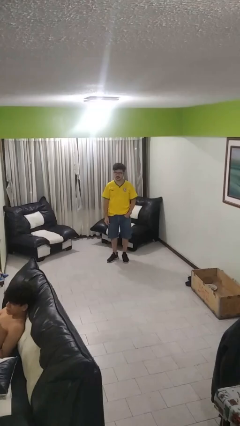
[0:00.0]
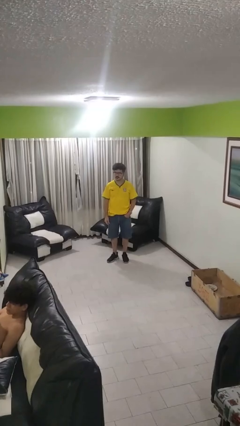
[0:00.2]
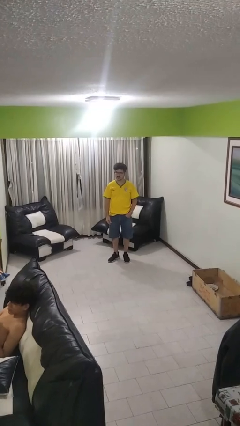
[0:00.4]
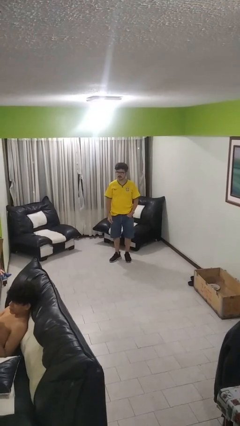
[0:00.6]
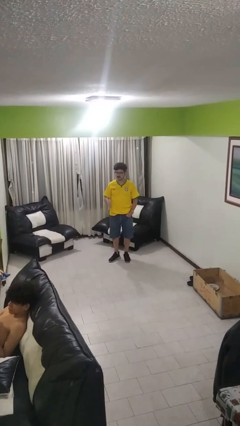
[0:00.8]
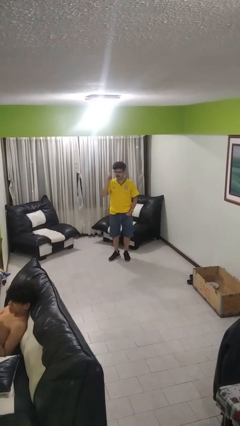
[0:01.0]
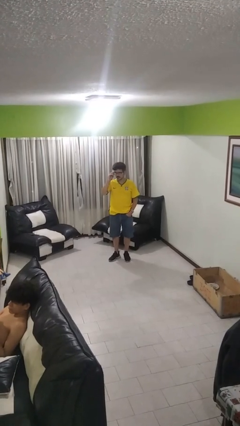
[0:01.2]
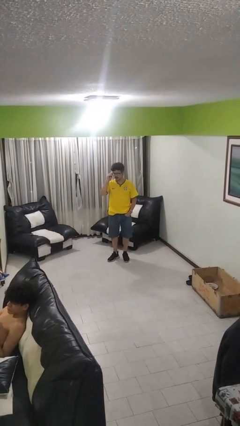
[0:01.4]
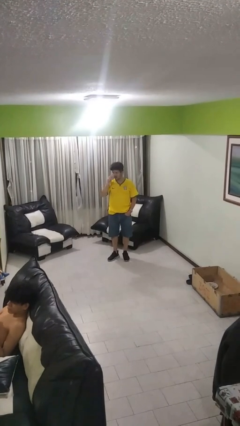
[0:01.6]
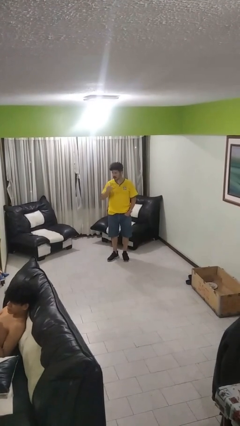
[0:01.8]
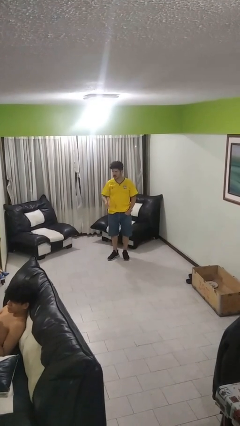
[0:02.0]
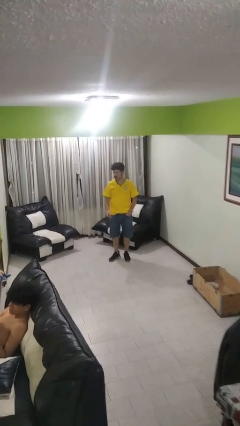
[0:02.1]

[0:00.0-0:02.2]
person takes off glasses

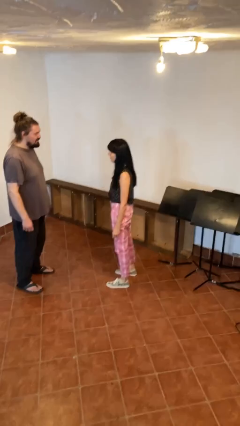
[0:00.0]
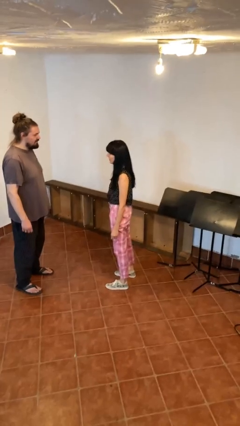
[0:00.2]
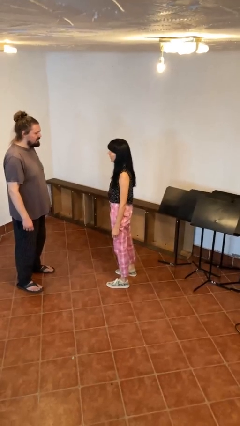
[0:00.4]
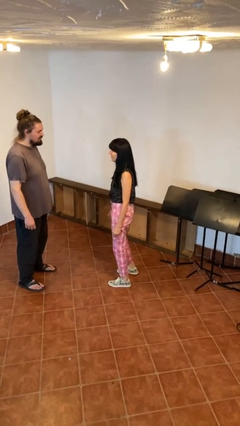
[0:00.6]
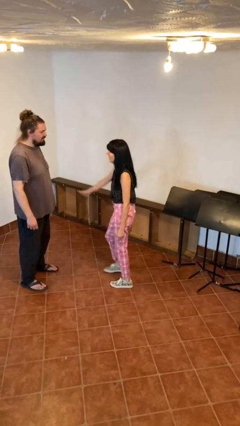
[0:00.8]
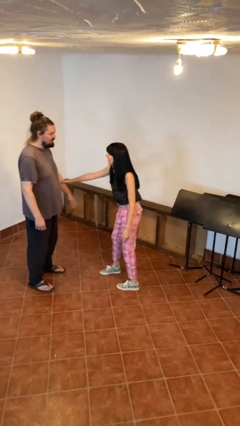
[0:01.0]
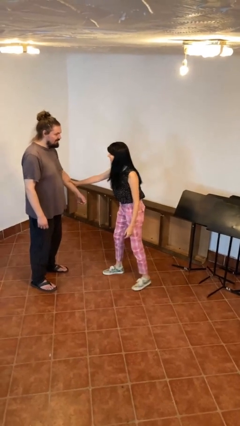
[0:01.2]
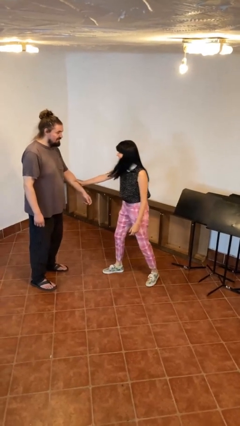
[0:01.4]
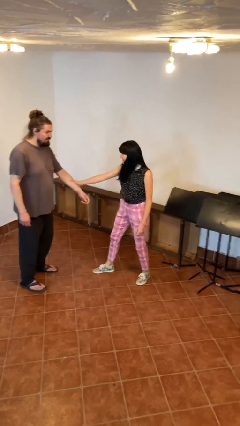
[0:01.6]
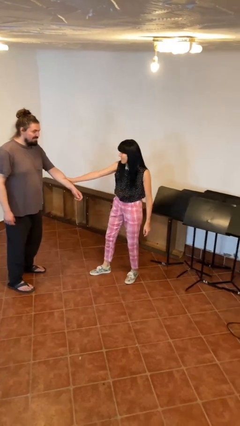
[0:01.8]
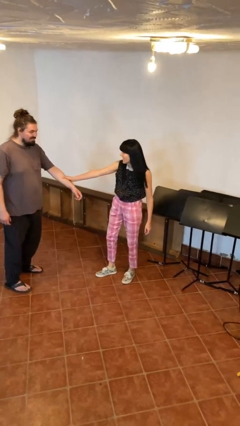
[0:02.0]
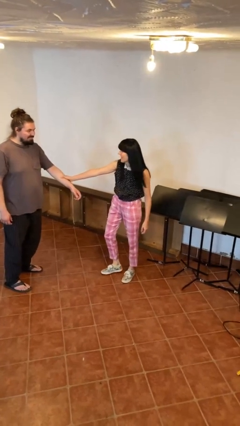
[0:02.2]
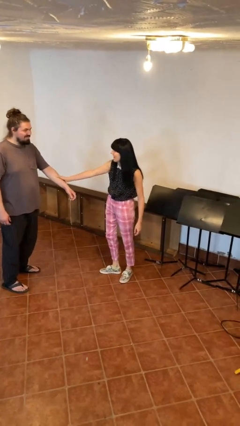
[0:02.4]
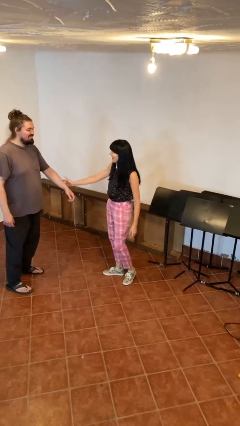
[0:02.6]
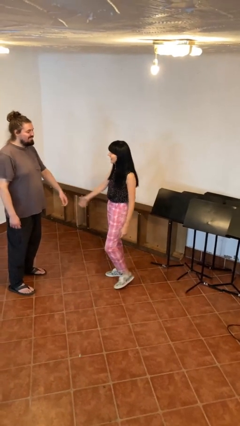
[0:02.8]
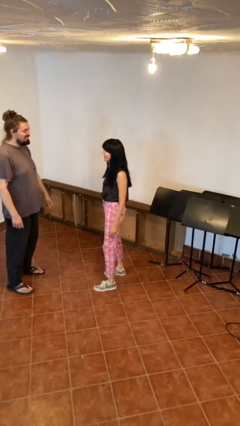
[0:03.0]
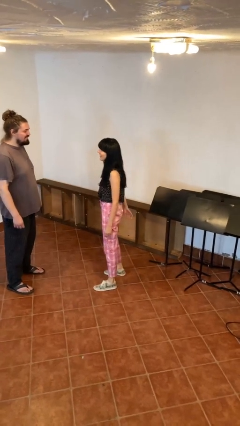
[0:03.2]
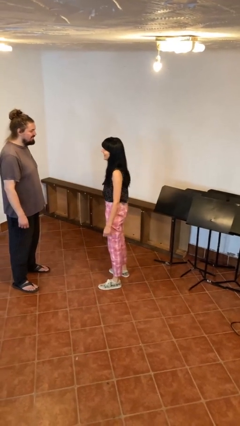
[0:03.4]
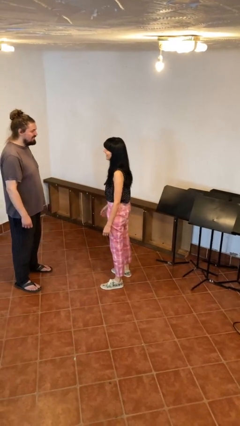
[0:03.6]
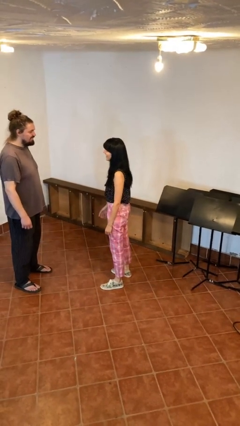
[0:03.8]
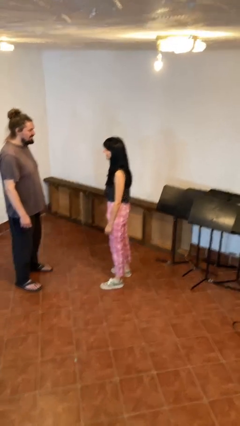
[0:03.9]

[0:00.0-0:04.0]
person grabs person by forearm

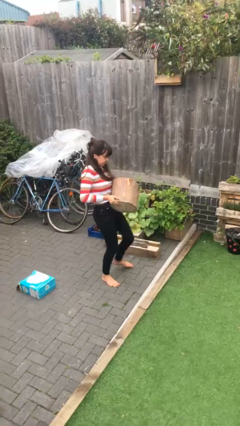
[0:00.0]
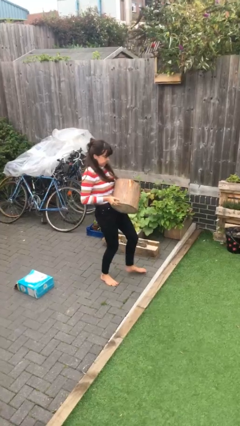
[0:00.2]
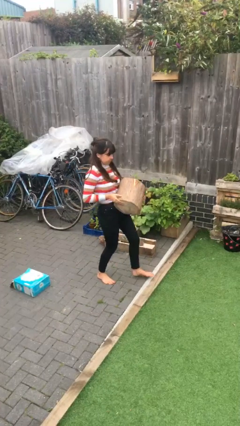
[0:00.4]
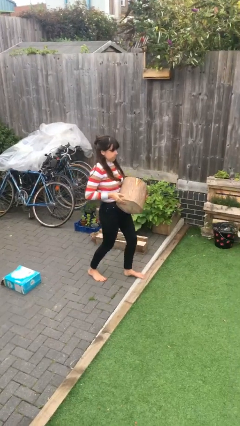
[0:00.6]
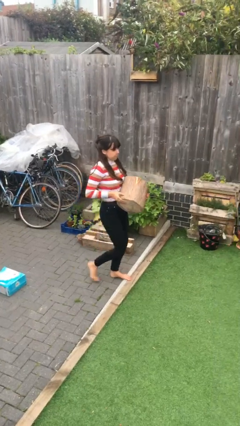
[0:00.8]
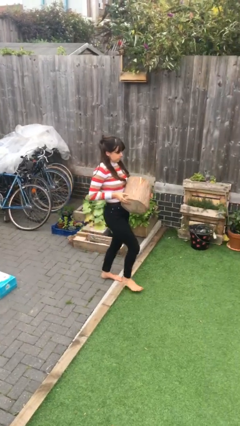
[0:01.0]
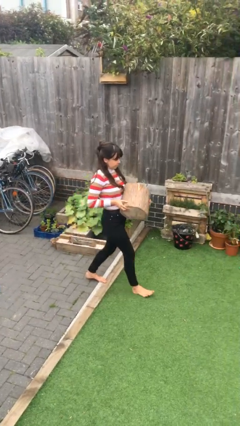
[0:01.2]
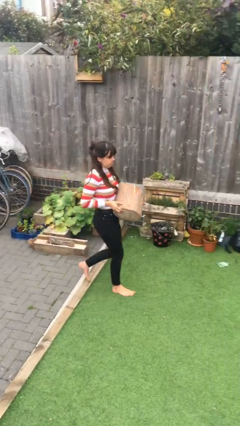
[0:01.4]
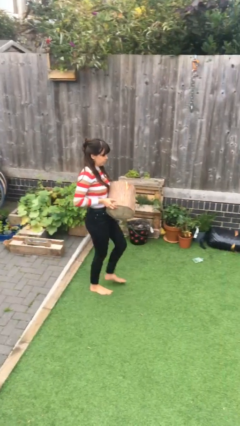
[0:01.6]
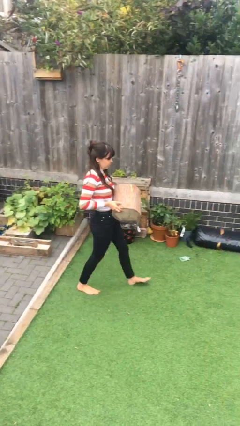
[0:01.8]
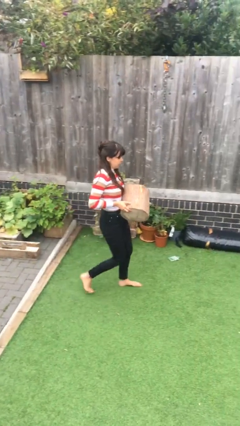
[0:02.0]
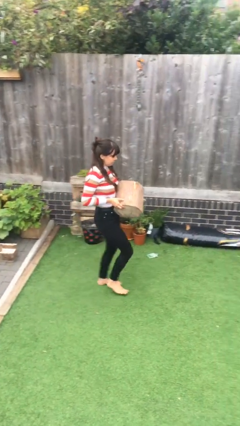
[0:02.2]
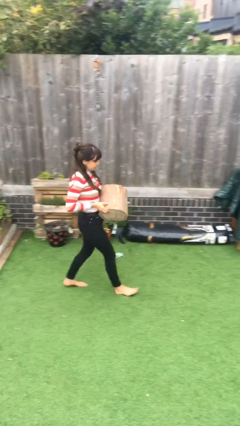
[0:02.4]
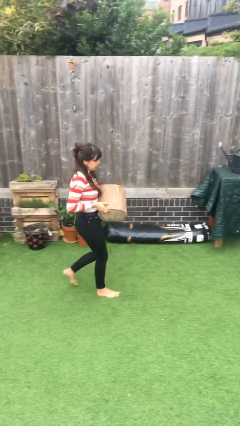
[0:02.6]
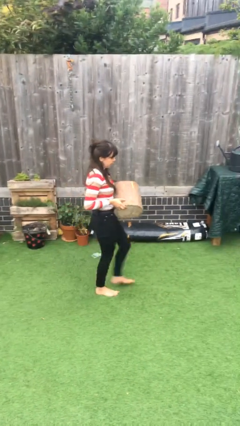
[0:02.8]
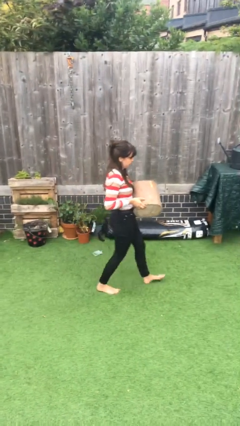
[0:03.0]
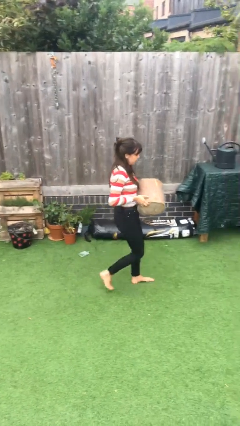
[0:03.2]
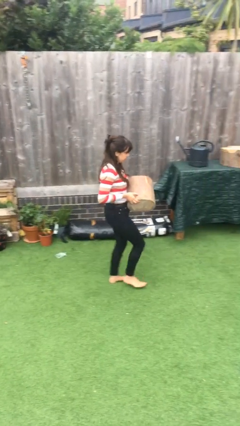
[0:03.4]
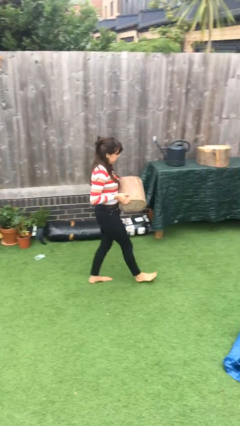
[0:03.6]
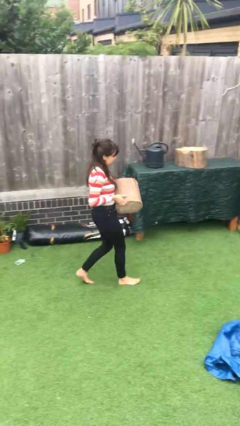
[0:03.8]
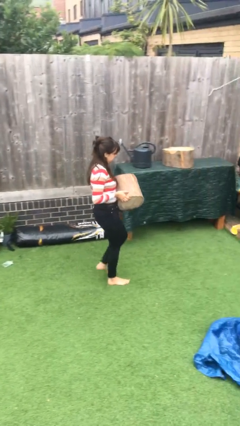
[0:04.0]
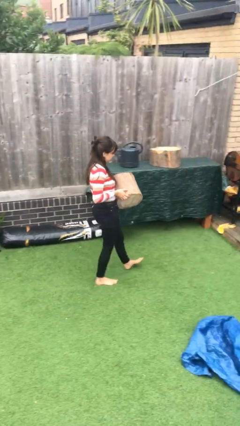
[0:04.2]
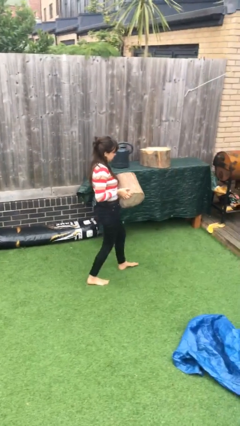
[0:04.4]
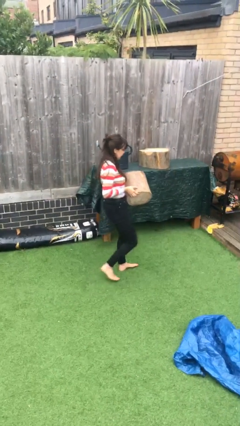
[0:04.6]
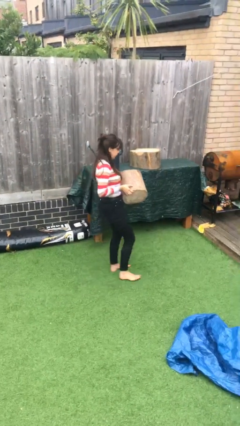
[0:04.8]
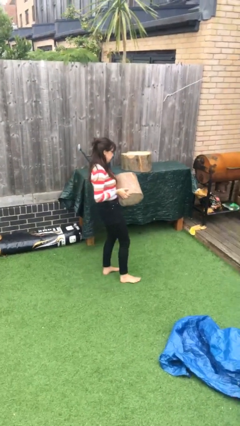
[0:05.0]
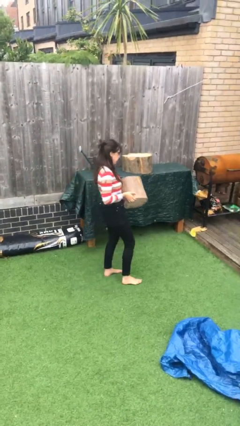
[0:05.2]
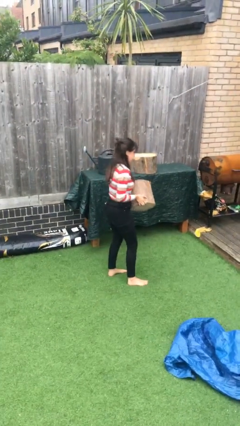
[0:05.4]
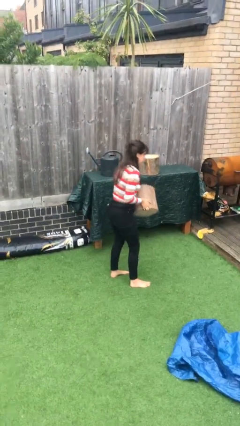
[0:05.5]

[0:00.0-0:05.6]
person carries heavy object

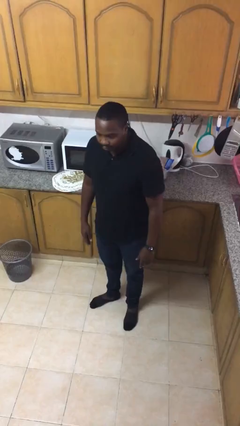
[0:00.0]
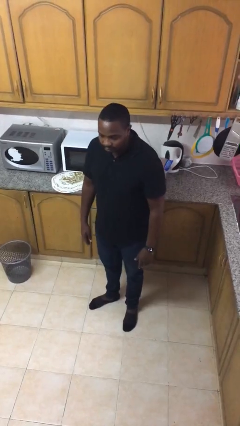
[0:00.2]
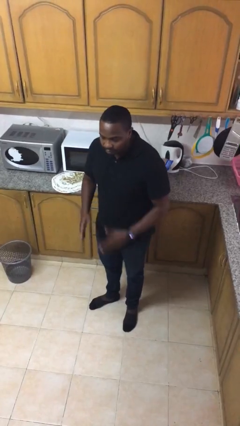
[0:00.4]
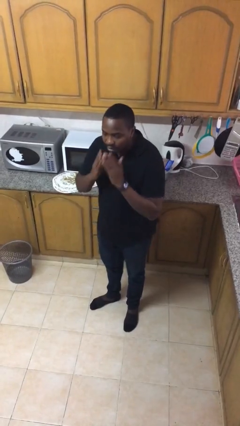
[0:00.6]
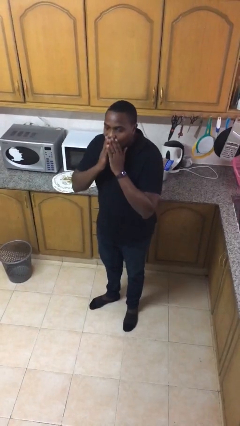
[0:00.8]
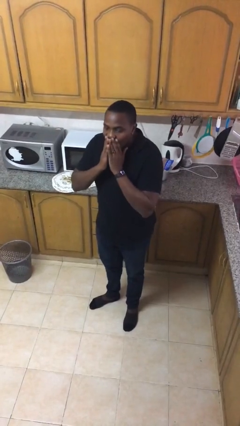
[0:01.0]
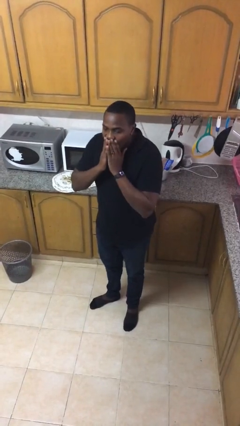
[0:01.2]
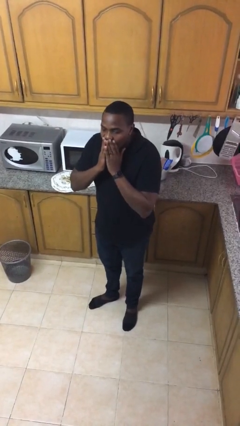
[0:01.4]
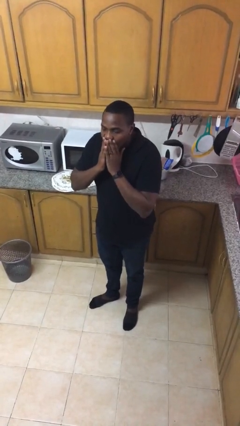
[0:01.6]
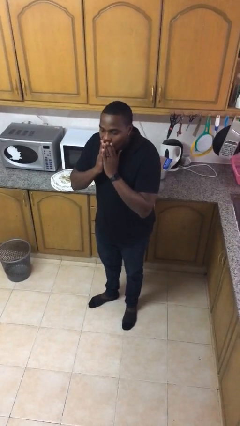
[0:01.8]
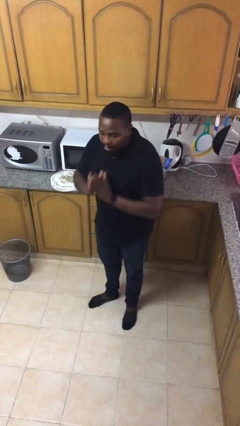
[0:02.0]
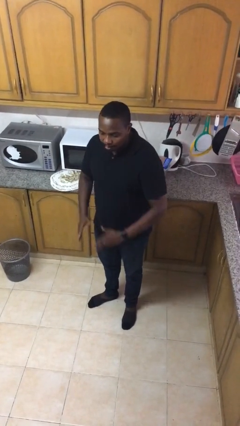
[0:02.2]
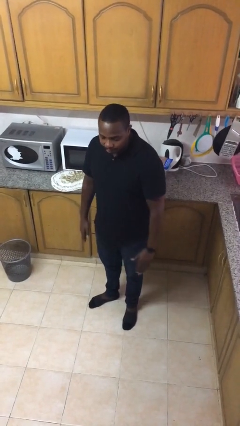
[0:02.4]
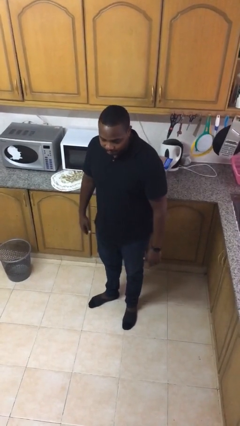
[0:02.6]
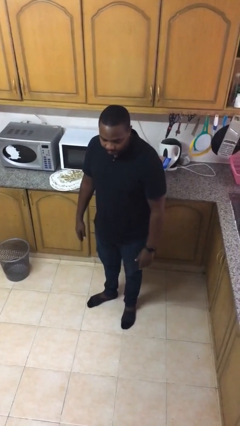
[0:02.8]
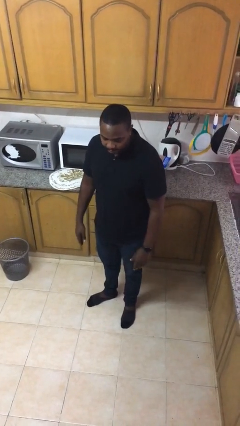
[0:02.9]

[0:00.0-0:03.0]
person yawns

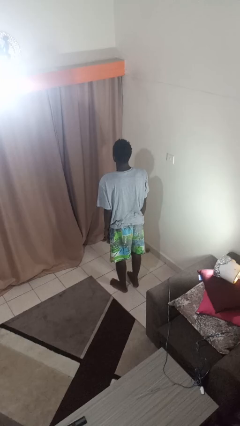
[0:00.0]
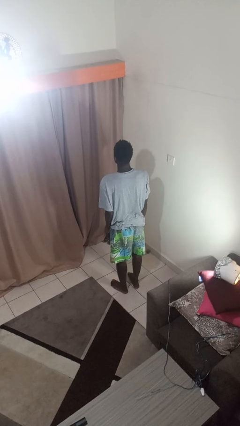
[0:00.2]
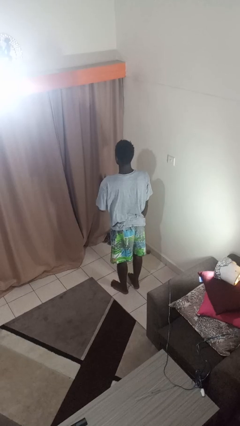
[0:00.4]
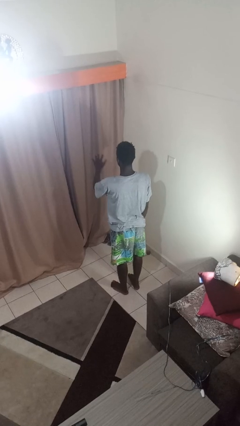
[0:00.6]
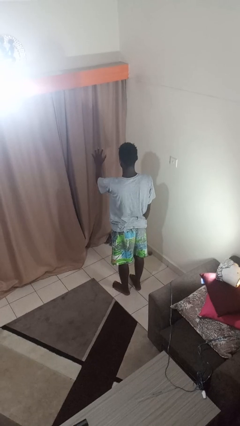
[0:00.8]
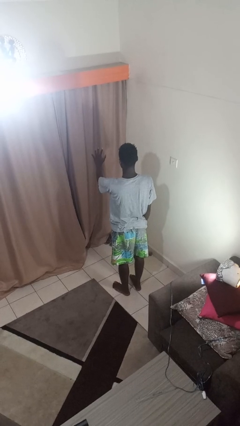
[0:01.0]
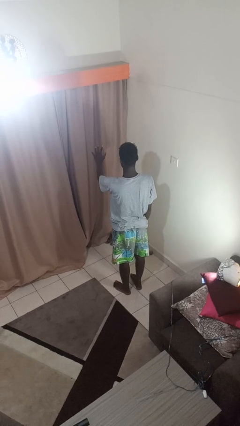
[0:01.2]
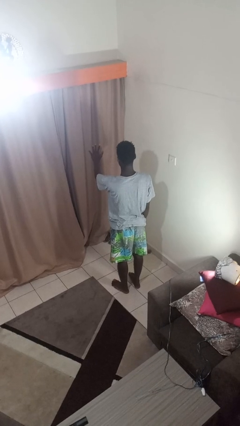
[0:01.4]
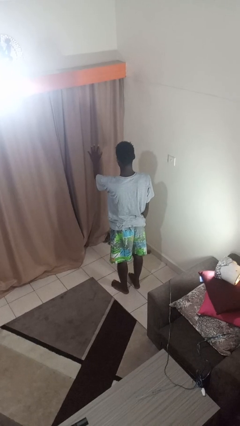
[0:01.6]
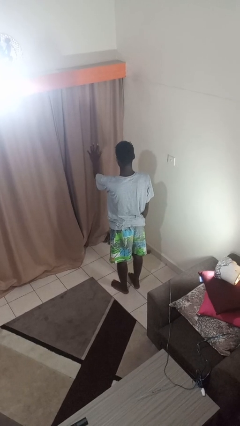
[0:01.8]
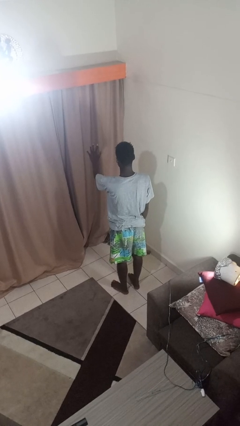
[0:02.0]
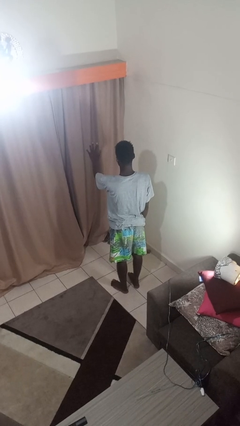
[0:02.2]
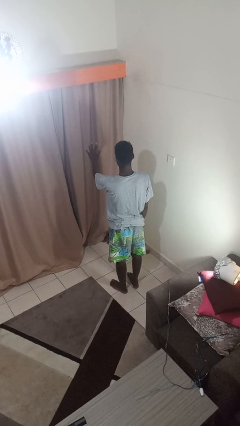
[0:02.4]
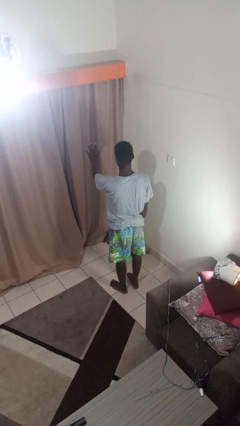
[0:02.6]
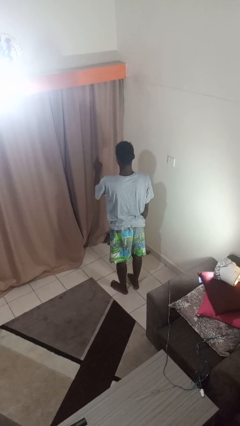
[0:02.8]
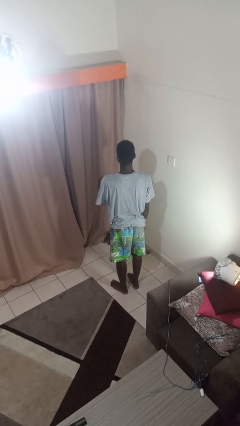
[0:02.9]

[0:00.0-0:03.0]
person gestures number five
